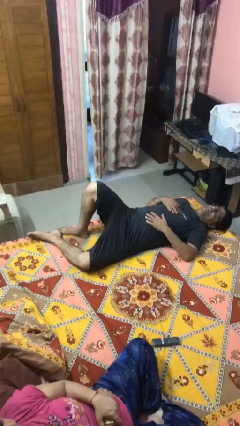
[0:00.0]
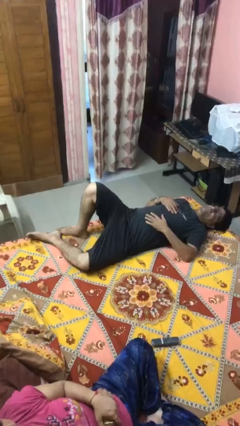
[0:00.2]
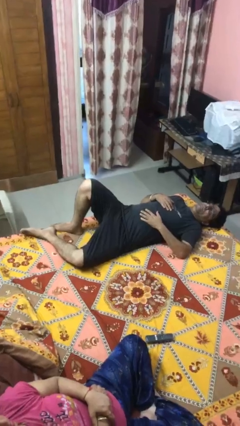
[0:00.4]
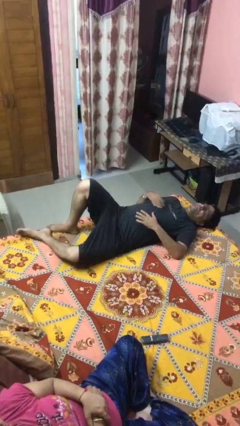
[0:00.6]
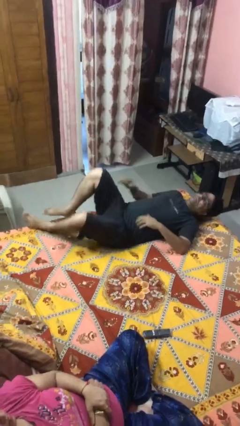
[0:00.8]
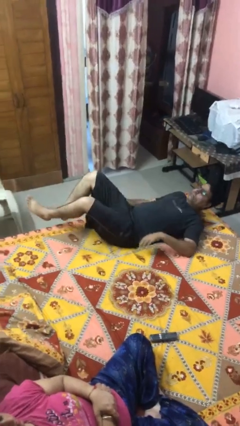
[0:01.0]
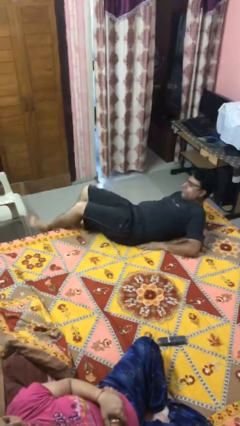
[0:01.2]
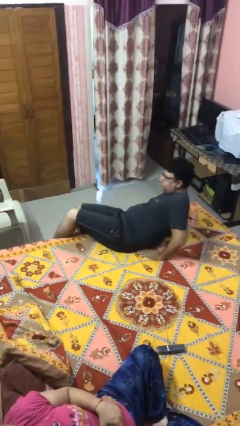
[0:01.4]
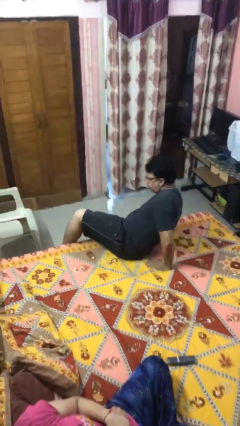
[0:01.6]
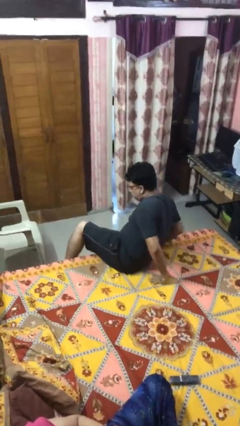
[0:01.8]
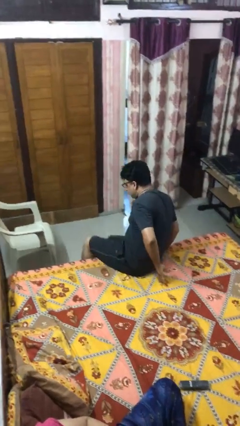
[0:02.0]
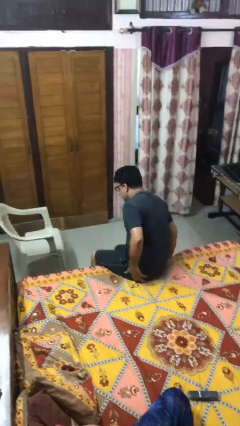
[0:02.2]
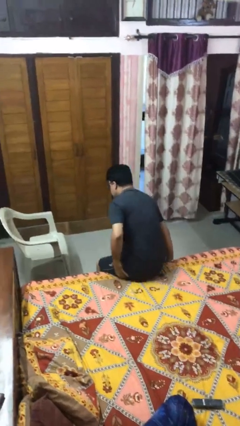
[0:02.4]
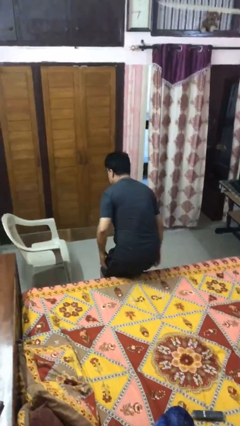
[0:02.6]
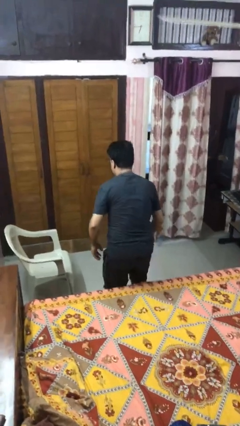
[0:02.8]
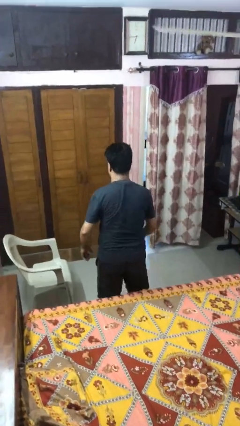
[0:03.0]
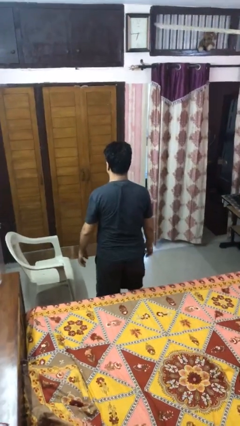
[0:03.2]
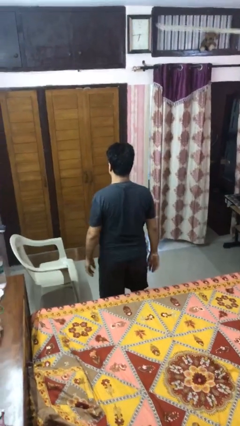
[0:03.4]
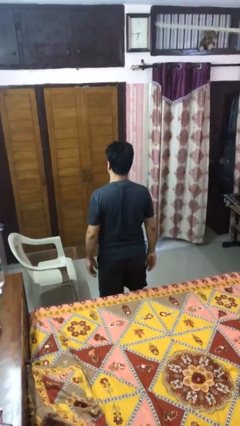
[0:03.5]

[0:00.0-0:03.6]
person stands up

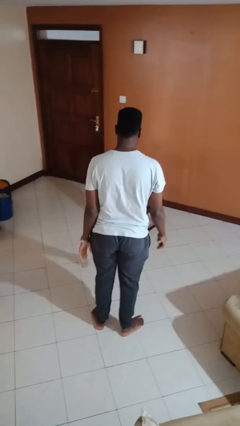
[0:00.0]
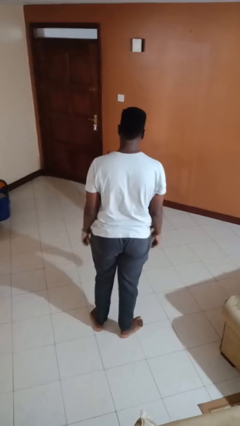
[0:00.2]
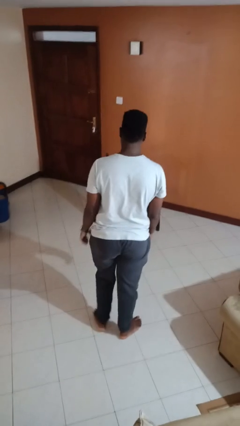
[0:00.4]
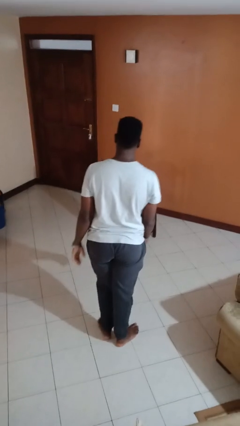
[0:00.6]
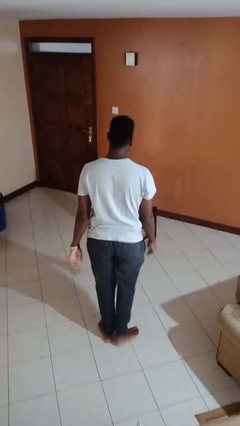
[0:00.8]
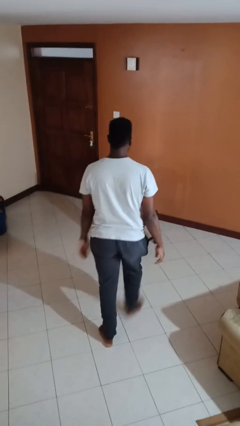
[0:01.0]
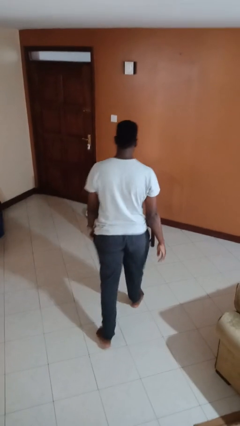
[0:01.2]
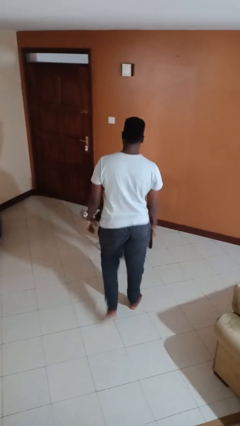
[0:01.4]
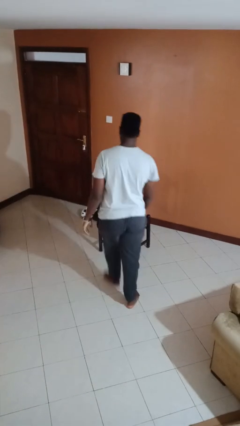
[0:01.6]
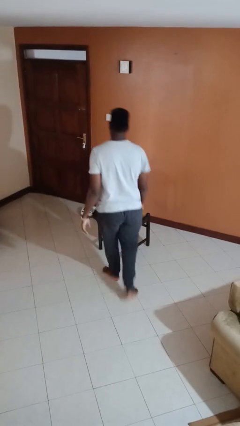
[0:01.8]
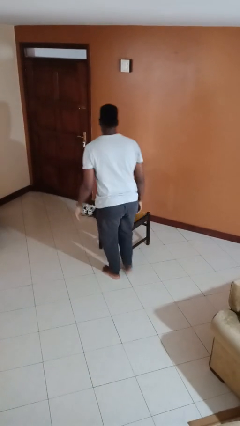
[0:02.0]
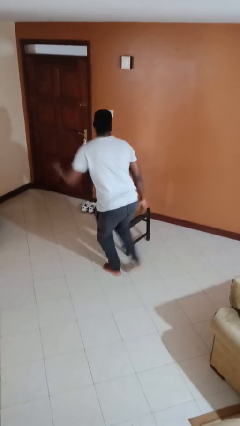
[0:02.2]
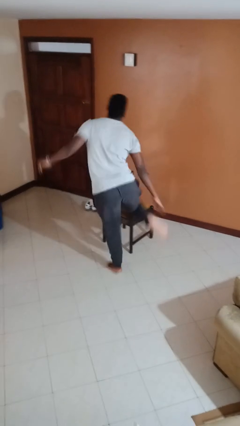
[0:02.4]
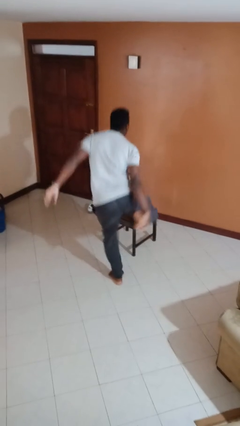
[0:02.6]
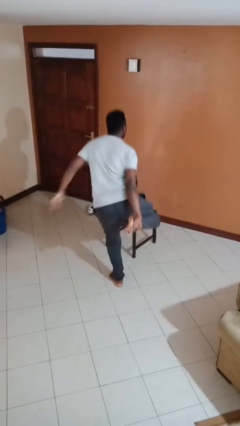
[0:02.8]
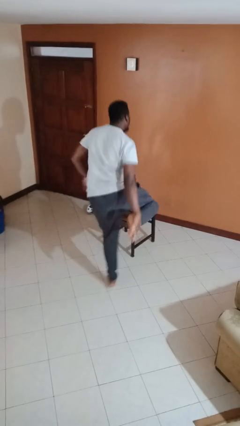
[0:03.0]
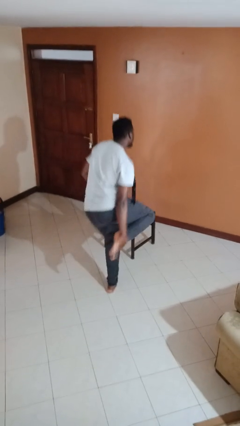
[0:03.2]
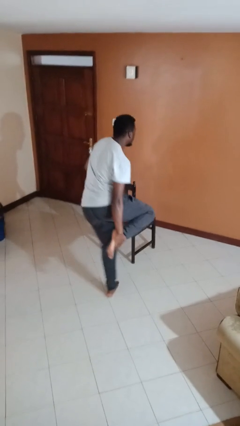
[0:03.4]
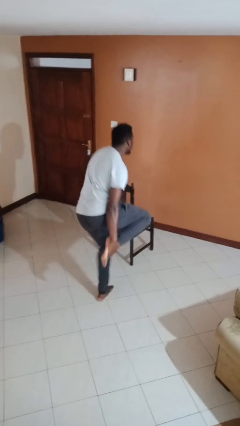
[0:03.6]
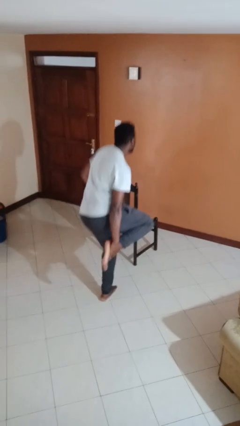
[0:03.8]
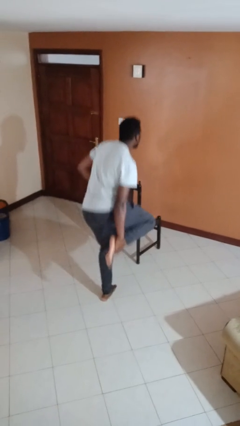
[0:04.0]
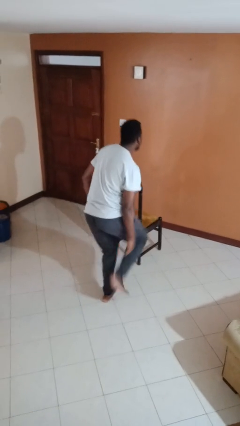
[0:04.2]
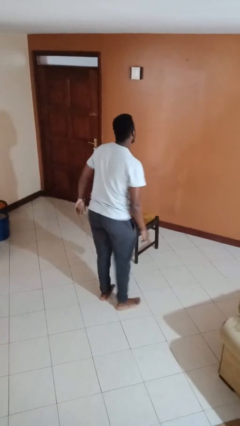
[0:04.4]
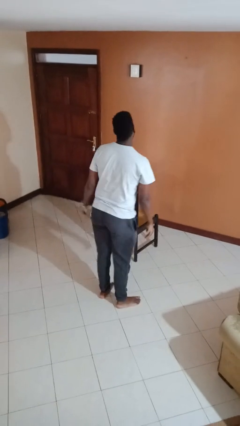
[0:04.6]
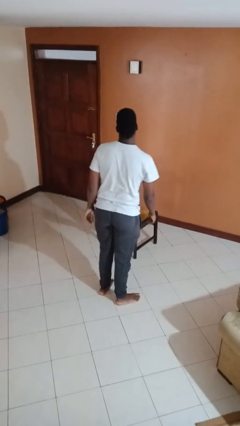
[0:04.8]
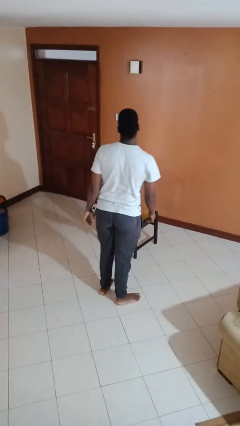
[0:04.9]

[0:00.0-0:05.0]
person stubs toe

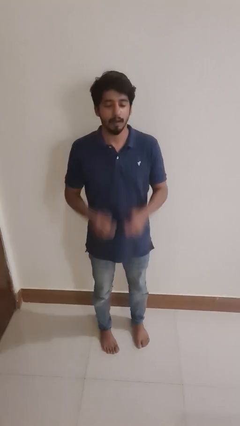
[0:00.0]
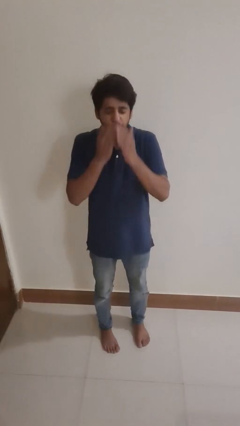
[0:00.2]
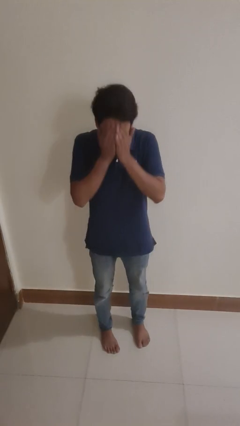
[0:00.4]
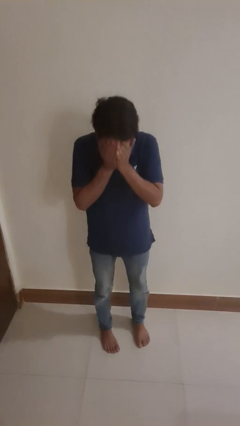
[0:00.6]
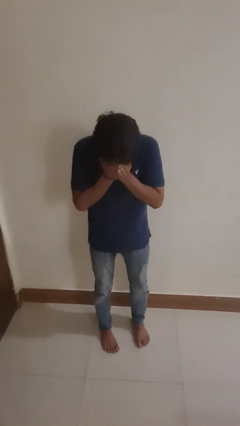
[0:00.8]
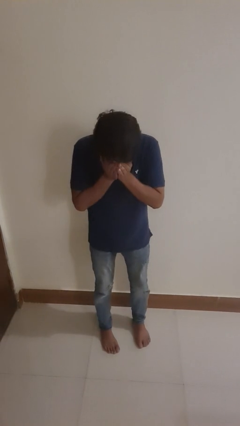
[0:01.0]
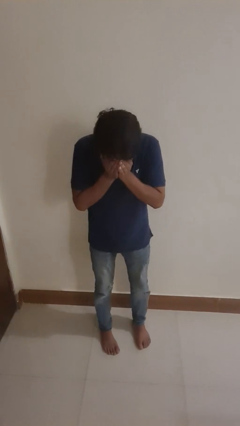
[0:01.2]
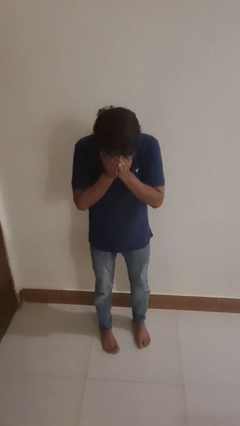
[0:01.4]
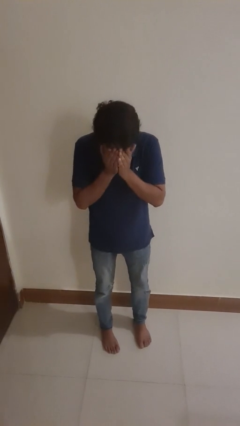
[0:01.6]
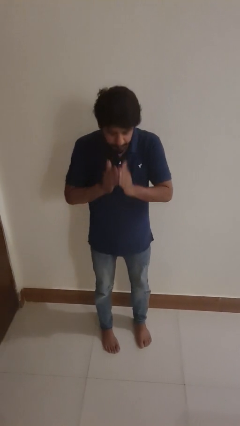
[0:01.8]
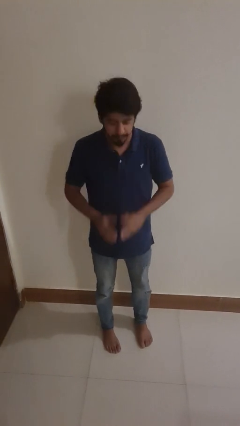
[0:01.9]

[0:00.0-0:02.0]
person sneezes into hand

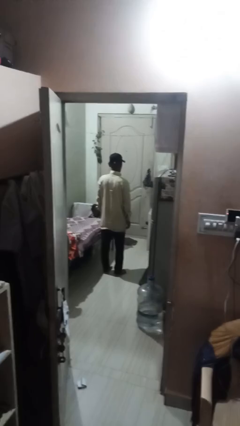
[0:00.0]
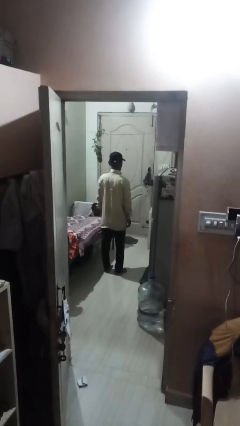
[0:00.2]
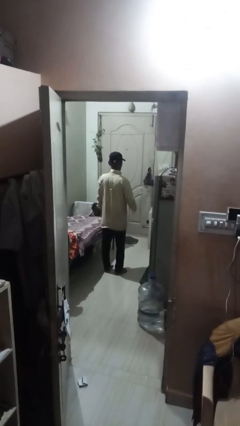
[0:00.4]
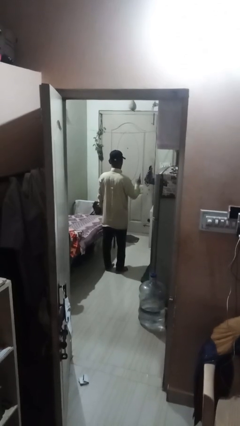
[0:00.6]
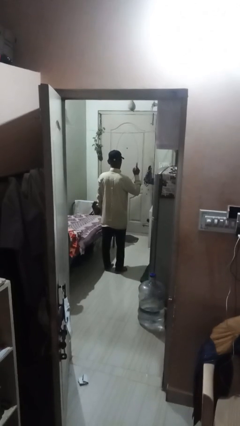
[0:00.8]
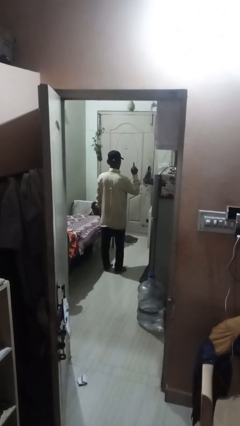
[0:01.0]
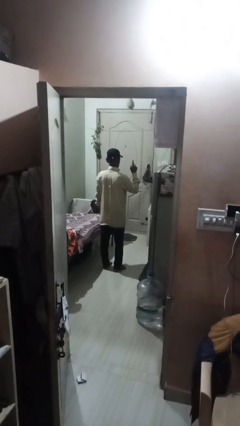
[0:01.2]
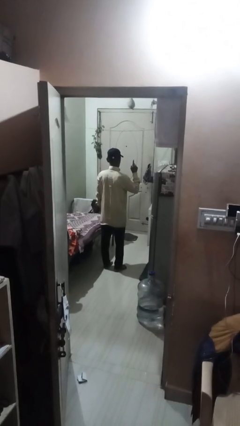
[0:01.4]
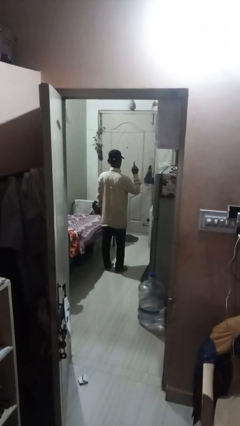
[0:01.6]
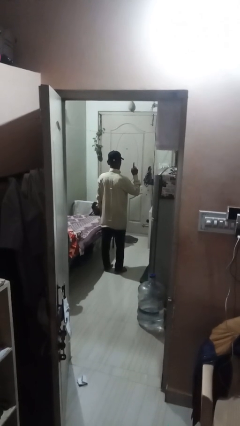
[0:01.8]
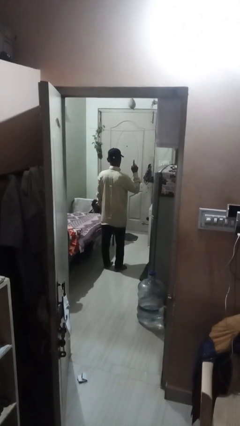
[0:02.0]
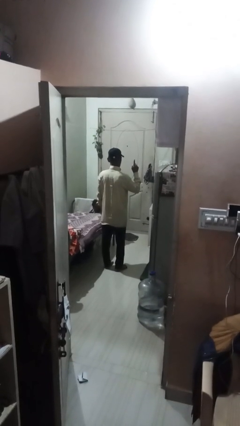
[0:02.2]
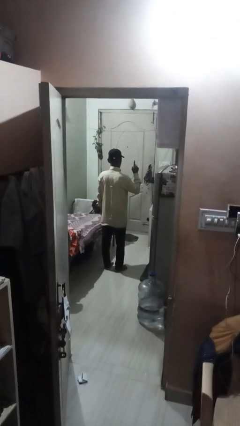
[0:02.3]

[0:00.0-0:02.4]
person gestures number one

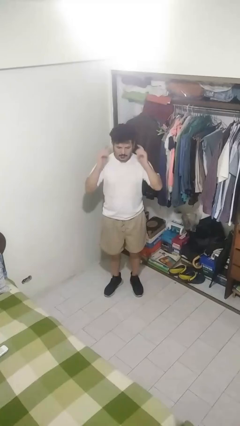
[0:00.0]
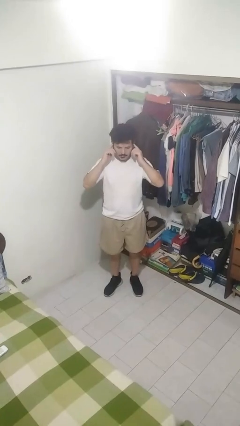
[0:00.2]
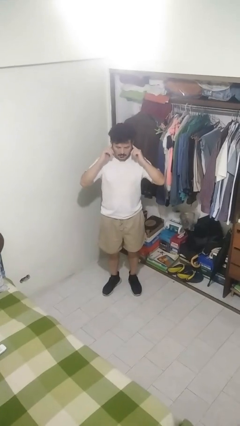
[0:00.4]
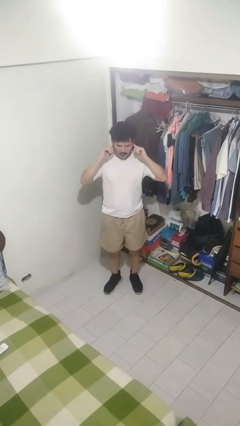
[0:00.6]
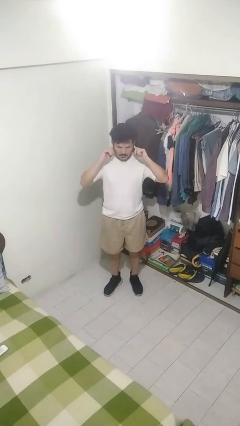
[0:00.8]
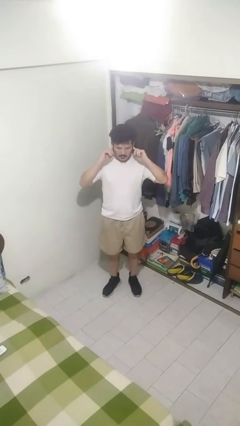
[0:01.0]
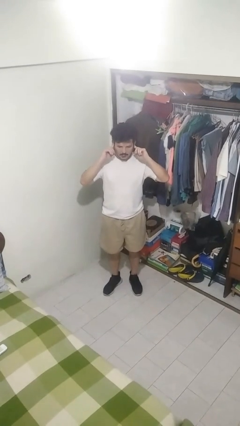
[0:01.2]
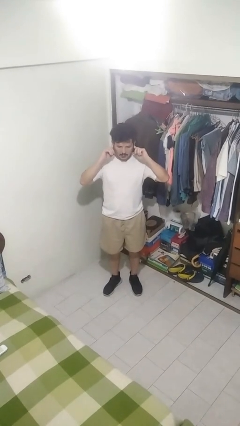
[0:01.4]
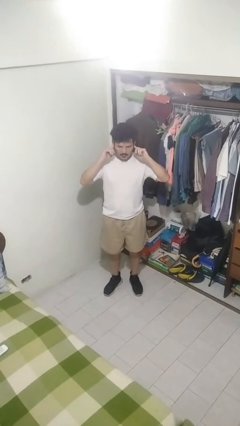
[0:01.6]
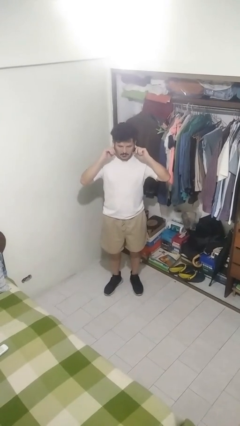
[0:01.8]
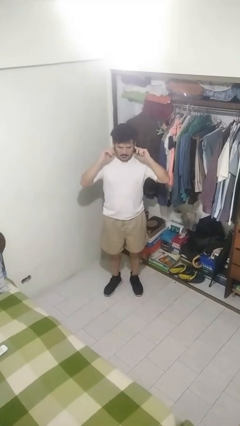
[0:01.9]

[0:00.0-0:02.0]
person puts fingers in ear

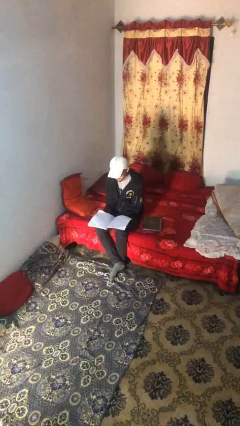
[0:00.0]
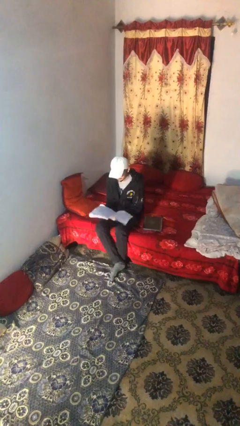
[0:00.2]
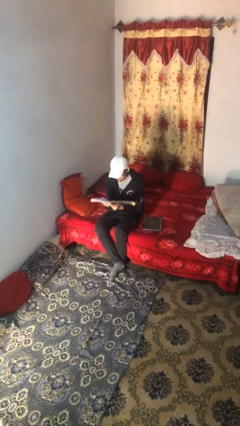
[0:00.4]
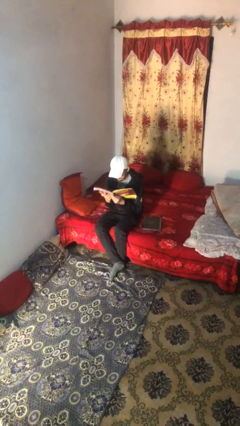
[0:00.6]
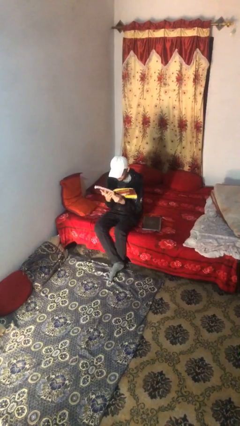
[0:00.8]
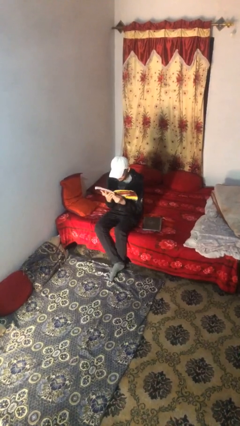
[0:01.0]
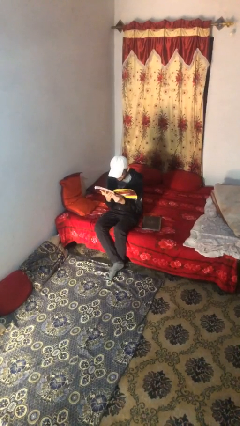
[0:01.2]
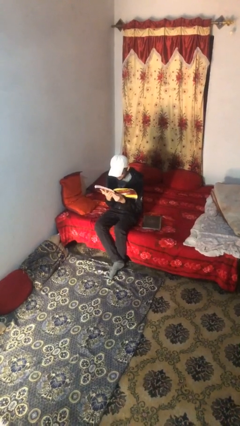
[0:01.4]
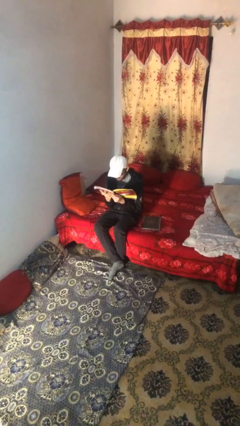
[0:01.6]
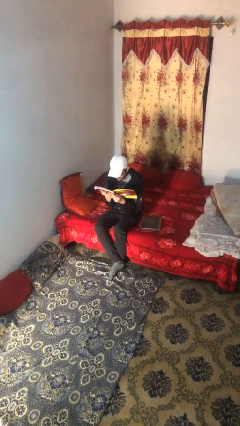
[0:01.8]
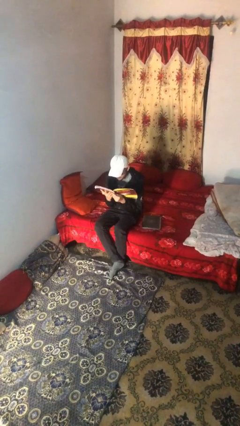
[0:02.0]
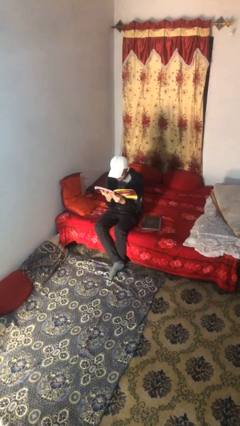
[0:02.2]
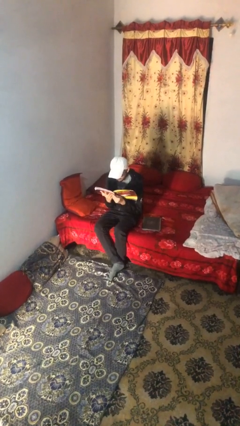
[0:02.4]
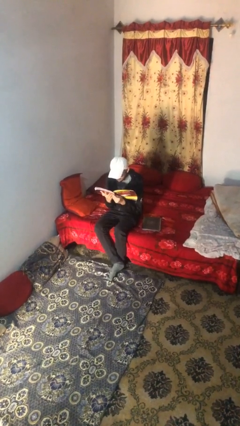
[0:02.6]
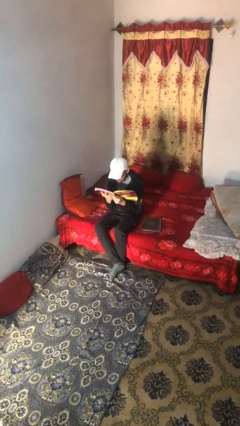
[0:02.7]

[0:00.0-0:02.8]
person reads document
